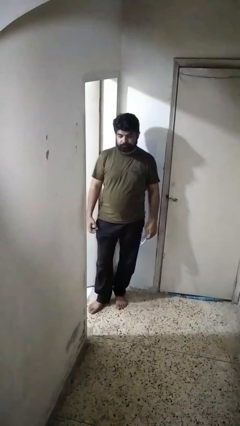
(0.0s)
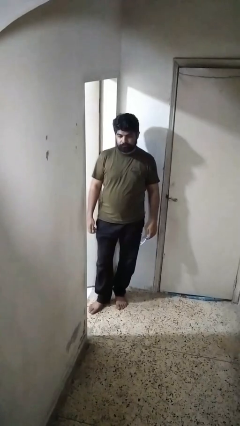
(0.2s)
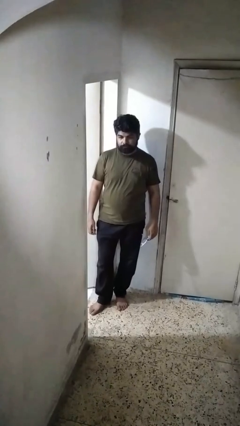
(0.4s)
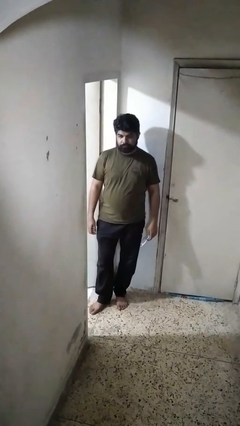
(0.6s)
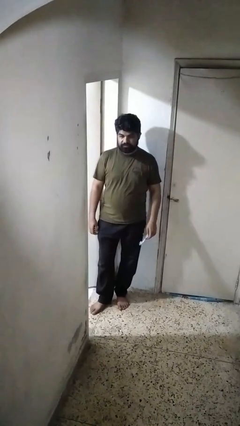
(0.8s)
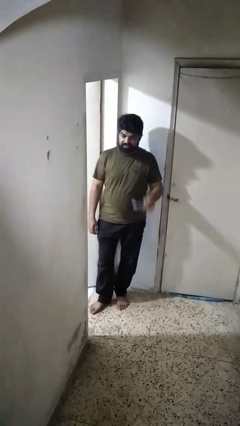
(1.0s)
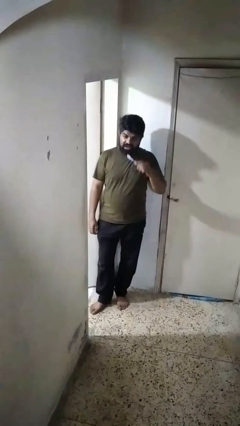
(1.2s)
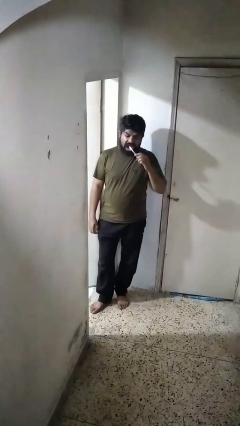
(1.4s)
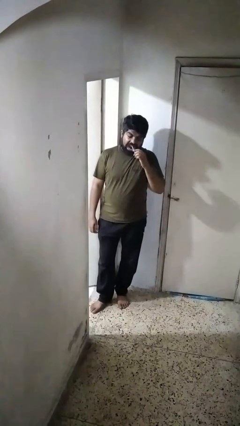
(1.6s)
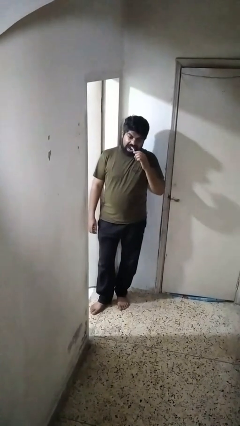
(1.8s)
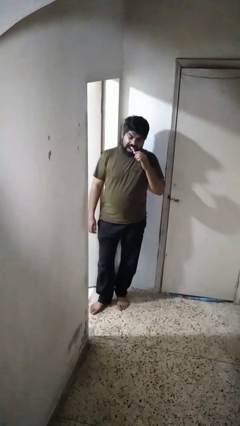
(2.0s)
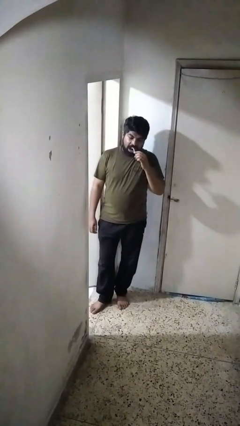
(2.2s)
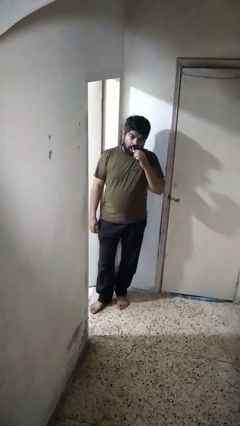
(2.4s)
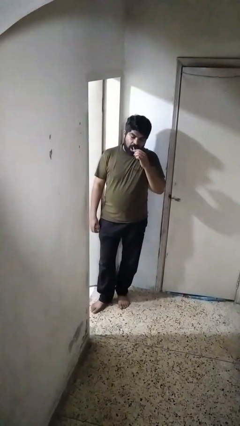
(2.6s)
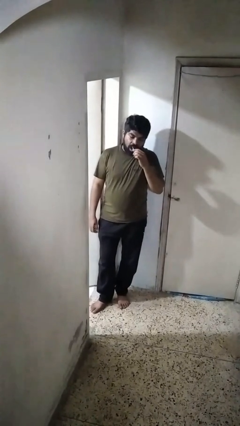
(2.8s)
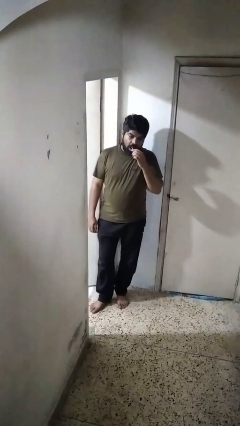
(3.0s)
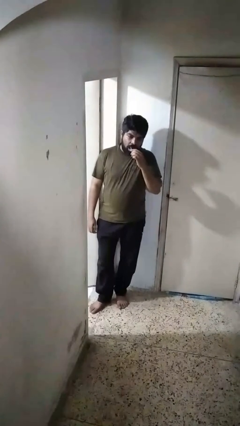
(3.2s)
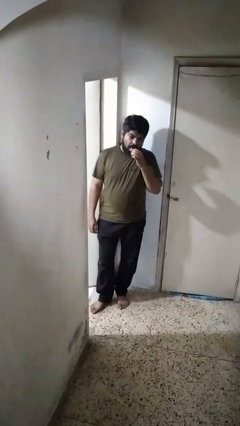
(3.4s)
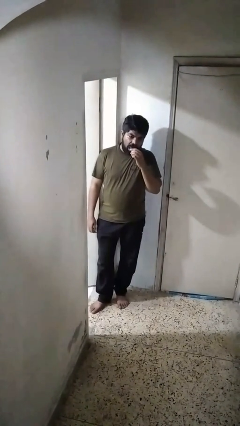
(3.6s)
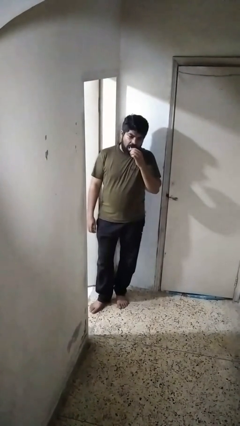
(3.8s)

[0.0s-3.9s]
person brushes teeth

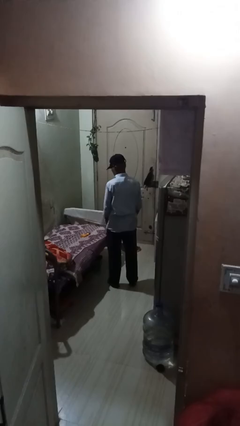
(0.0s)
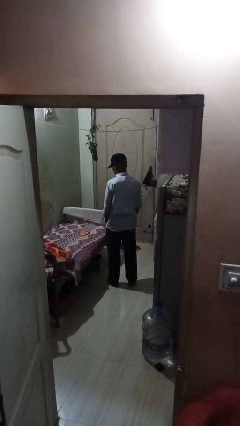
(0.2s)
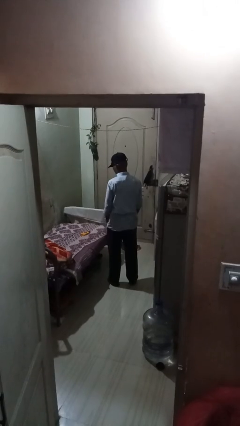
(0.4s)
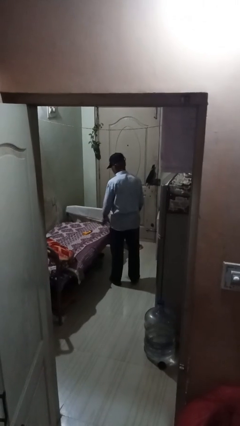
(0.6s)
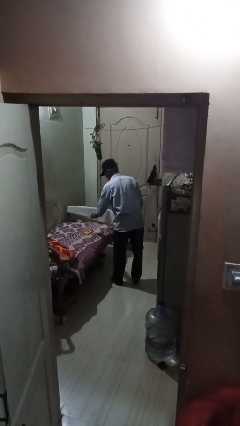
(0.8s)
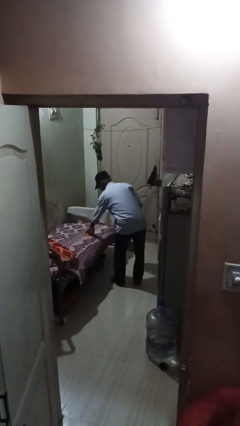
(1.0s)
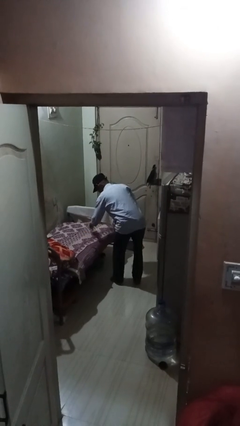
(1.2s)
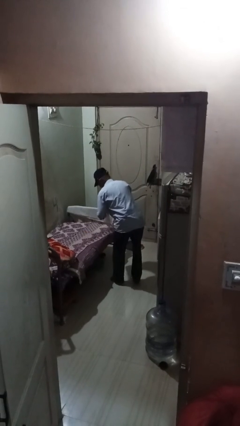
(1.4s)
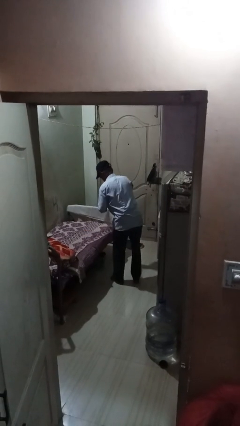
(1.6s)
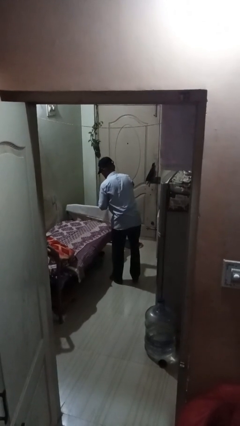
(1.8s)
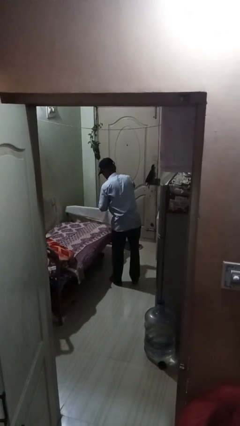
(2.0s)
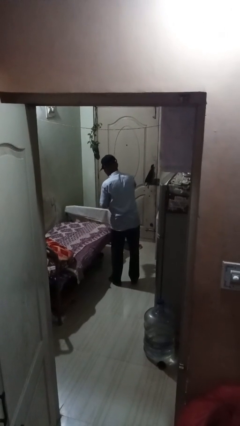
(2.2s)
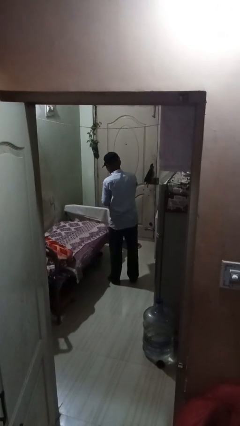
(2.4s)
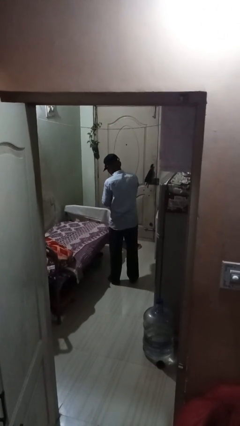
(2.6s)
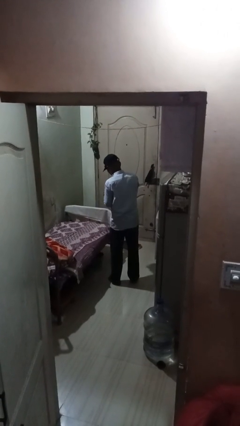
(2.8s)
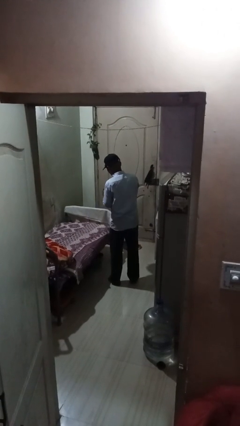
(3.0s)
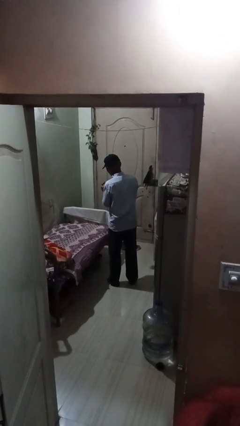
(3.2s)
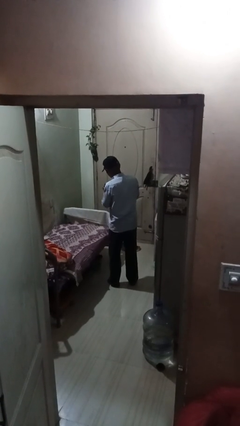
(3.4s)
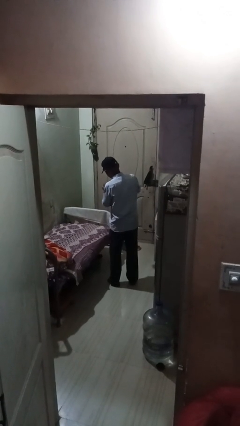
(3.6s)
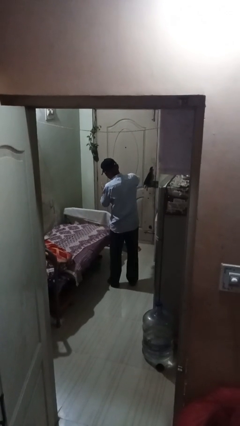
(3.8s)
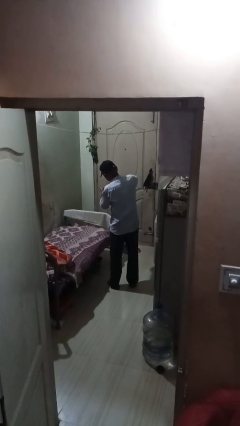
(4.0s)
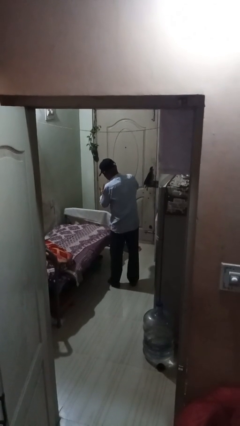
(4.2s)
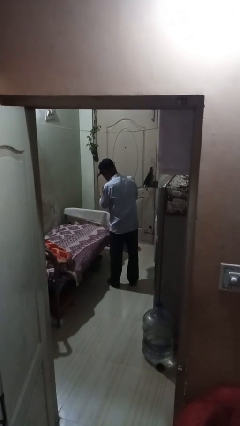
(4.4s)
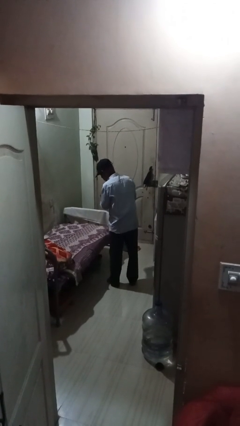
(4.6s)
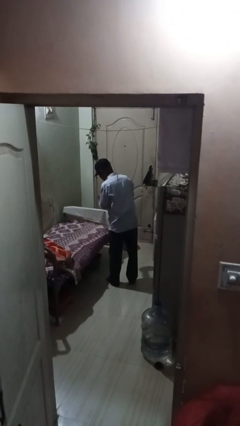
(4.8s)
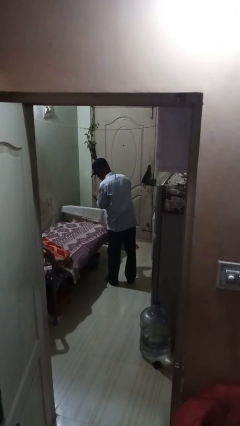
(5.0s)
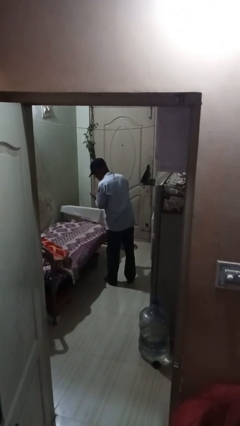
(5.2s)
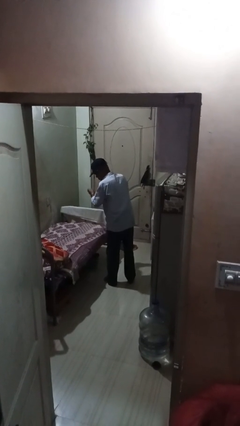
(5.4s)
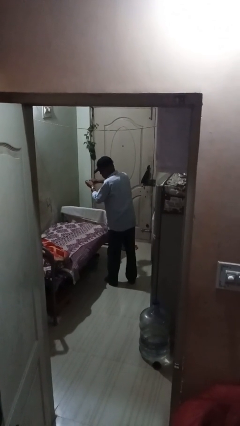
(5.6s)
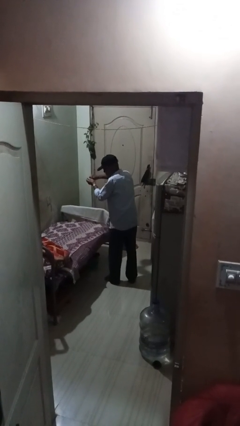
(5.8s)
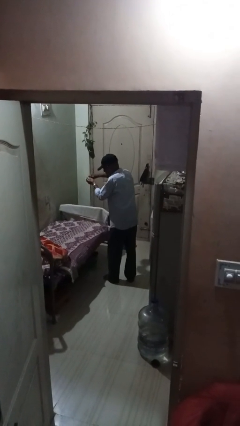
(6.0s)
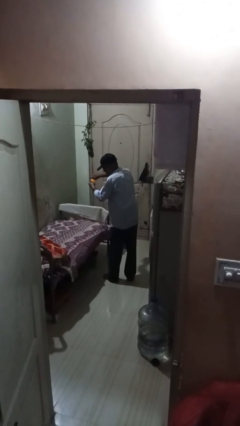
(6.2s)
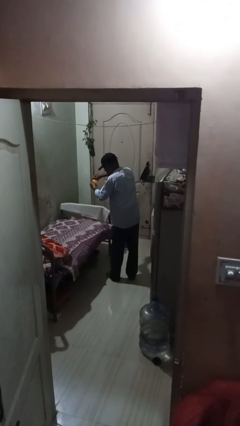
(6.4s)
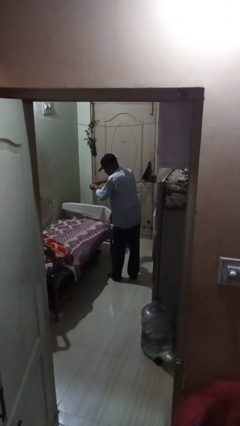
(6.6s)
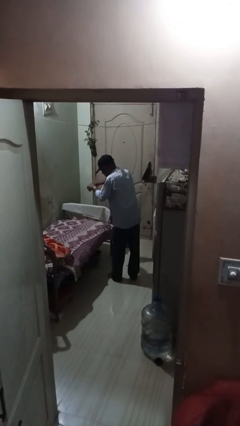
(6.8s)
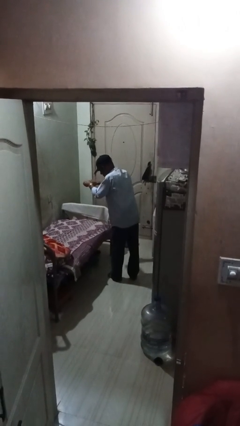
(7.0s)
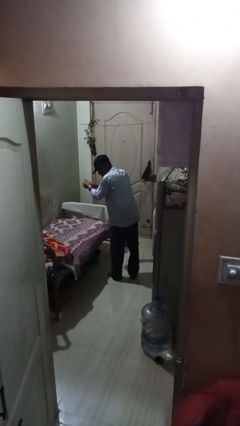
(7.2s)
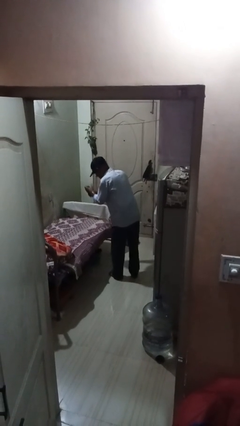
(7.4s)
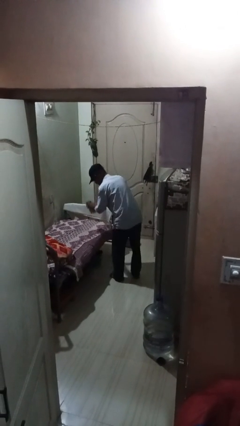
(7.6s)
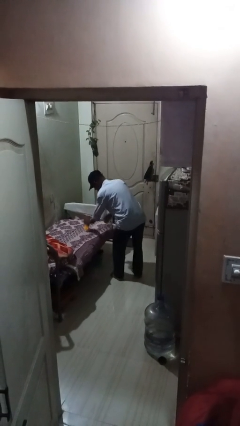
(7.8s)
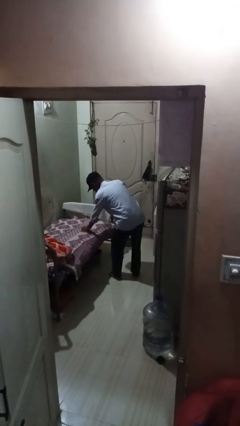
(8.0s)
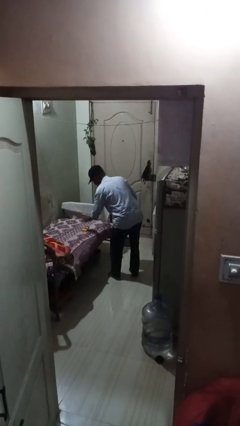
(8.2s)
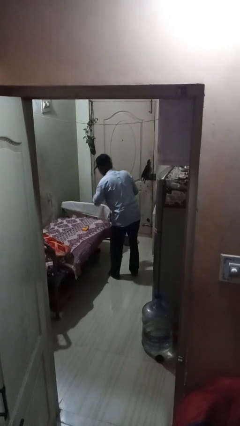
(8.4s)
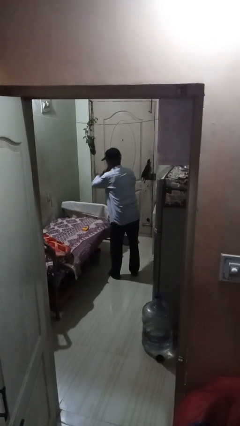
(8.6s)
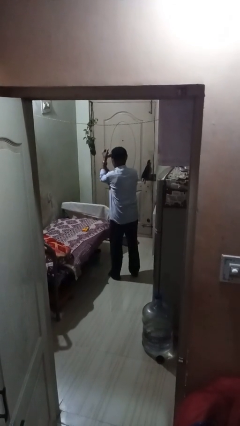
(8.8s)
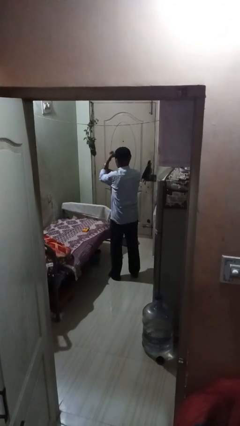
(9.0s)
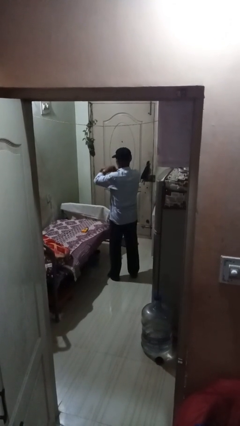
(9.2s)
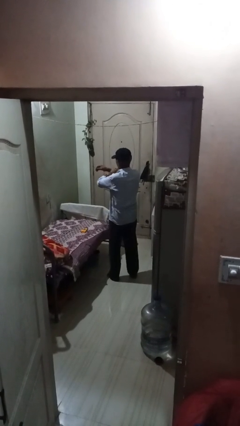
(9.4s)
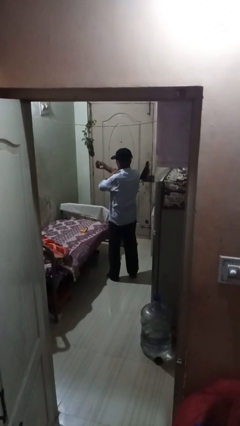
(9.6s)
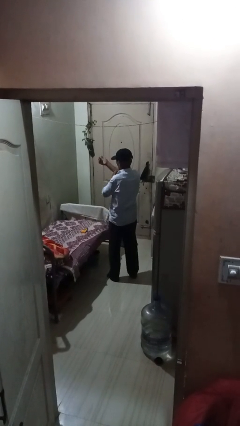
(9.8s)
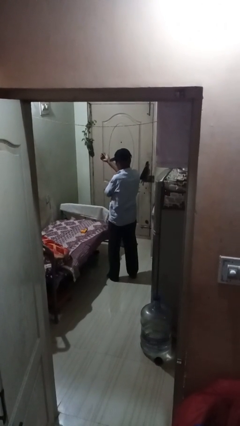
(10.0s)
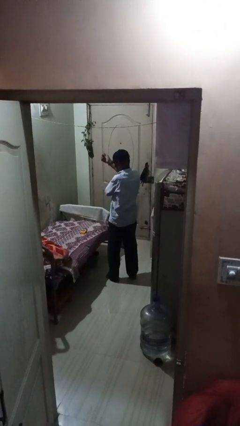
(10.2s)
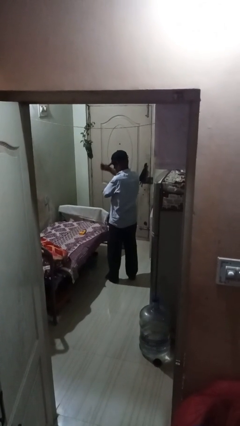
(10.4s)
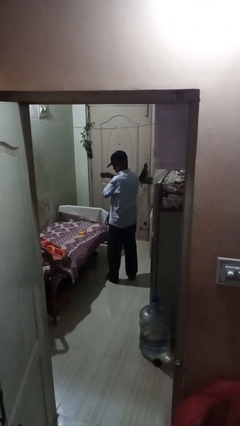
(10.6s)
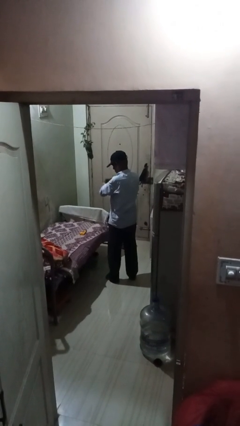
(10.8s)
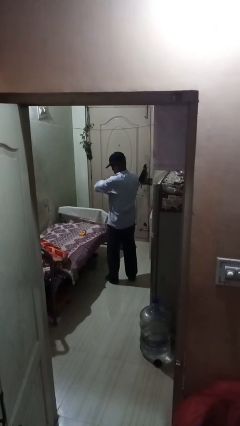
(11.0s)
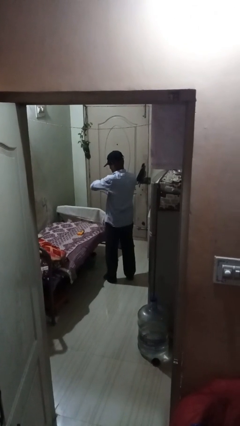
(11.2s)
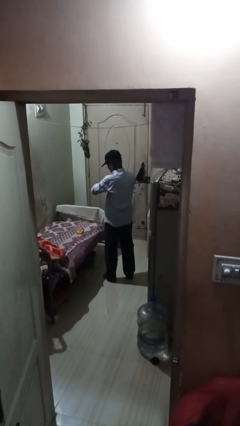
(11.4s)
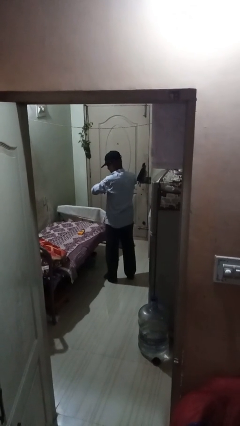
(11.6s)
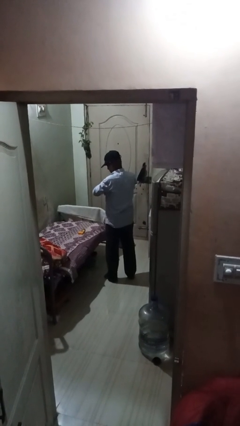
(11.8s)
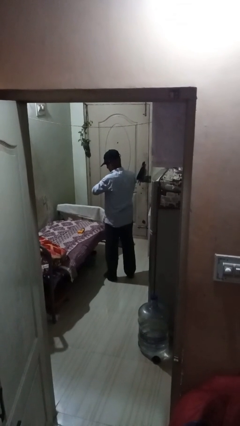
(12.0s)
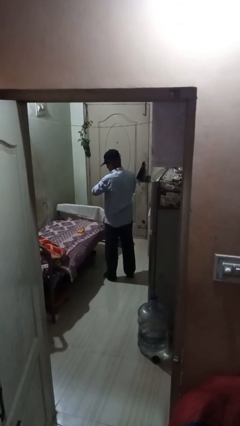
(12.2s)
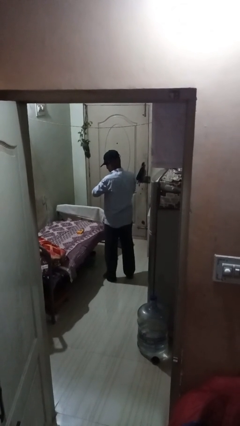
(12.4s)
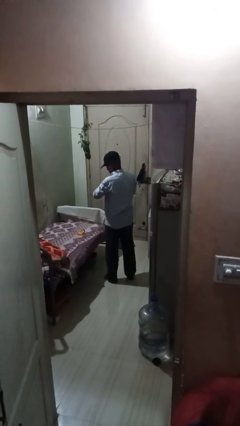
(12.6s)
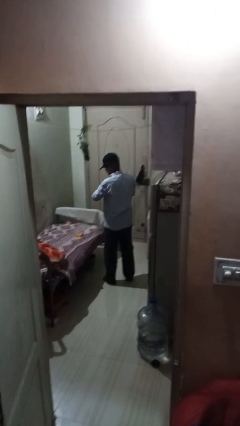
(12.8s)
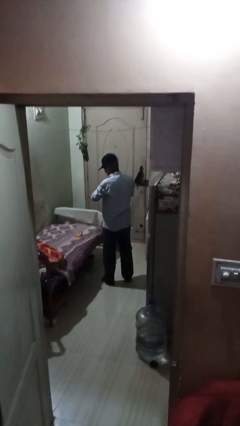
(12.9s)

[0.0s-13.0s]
person applies sunscreen

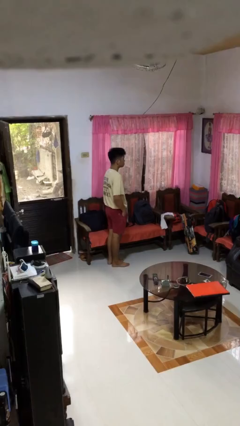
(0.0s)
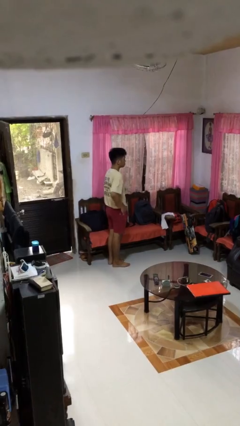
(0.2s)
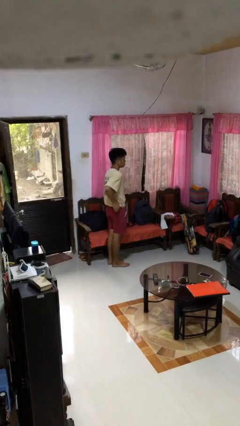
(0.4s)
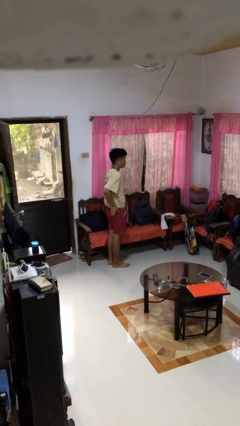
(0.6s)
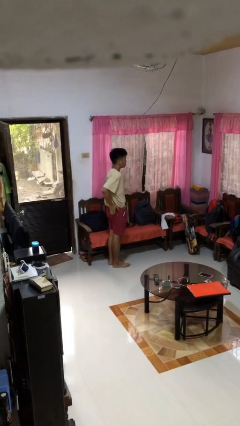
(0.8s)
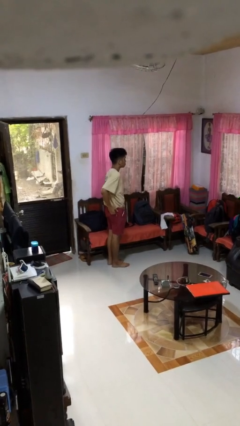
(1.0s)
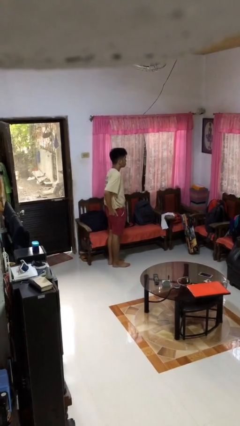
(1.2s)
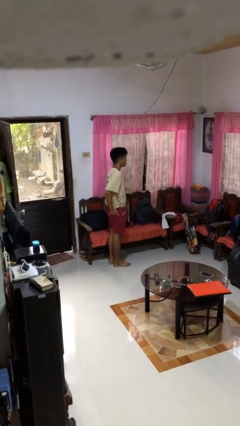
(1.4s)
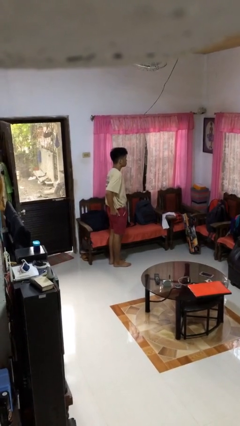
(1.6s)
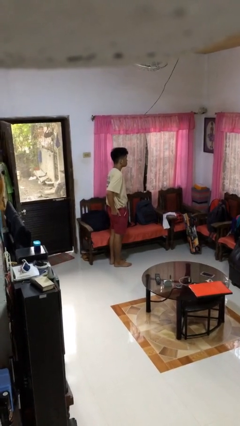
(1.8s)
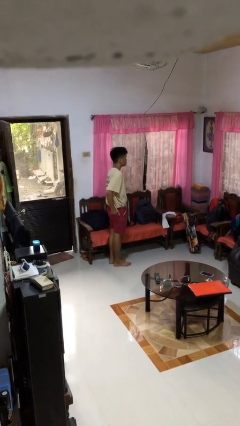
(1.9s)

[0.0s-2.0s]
person puts hands in back pockets
